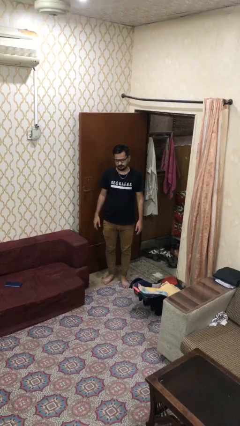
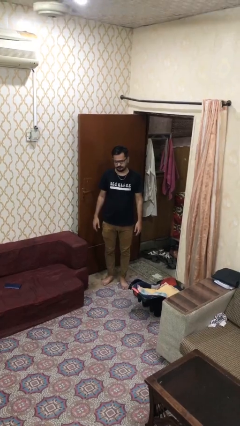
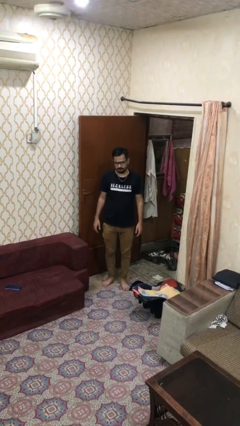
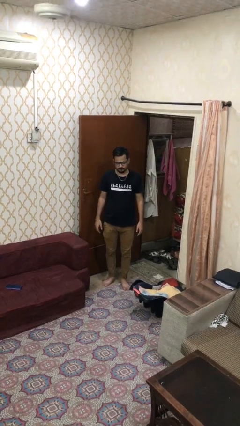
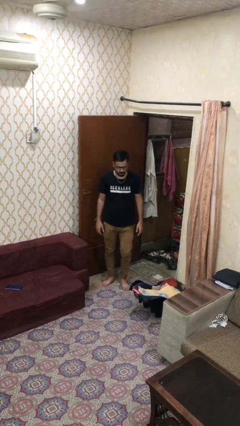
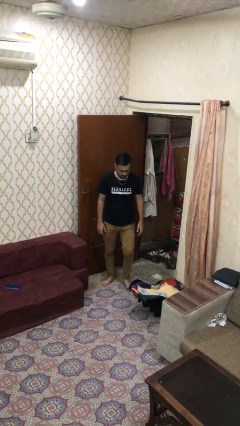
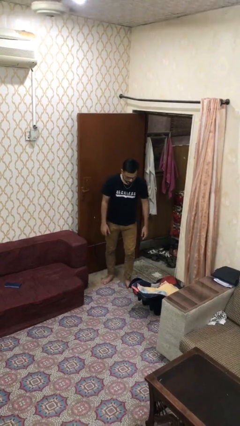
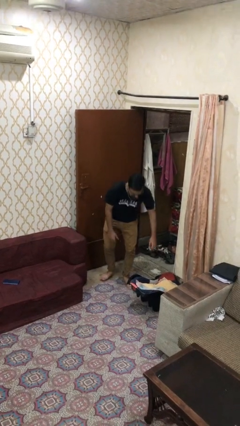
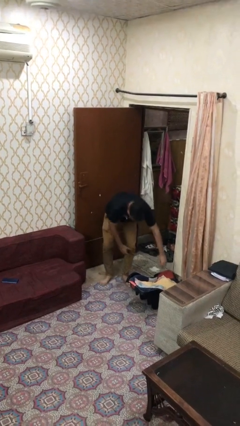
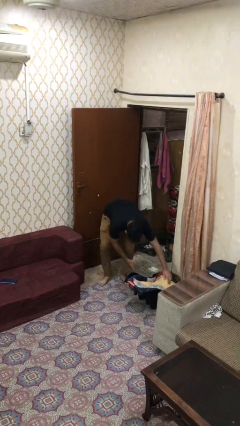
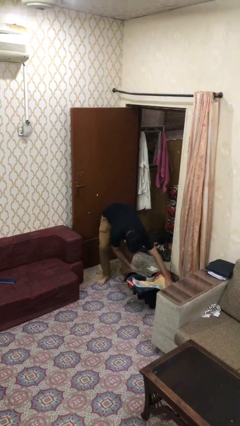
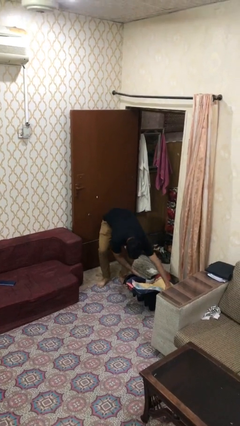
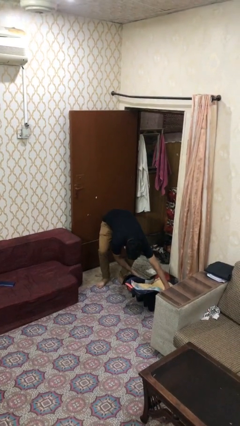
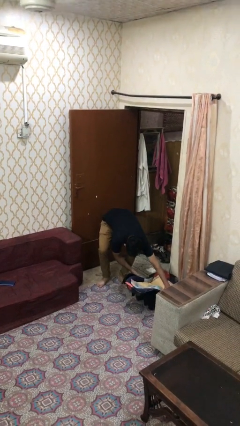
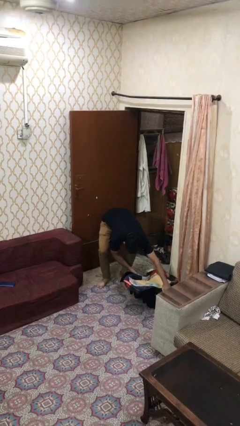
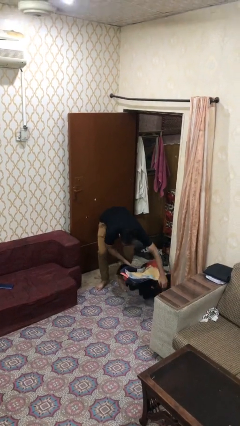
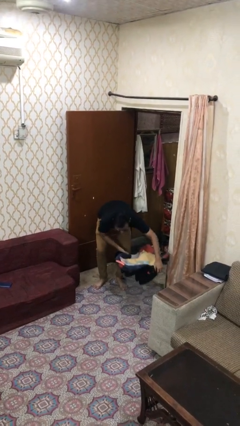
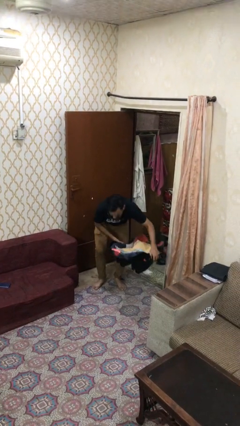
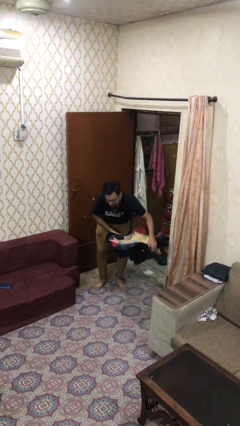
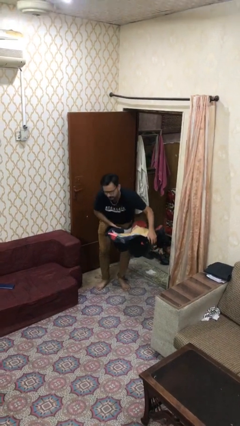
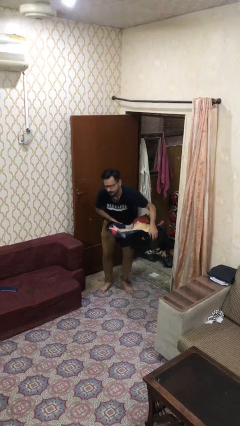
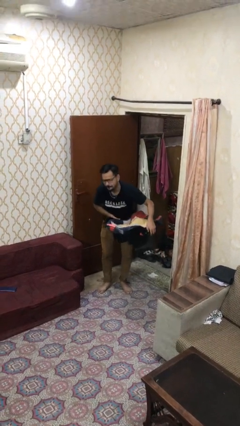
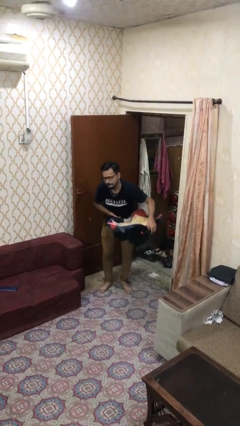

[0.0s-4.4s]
person picks up object from floor

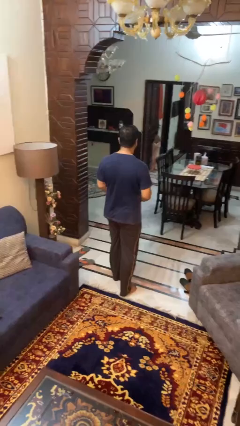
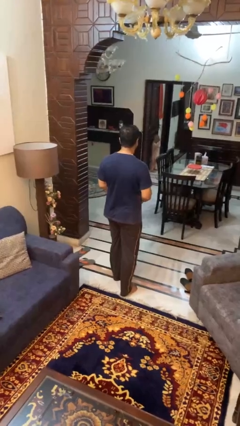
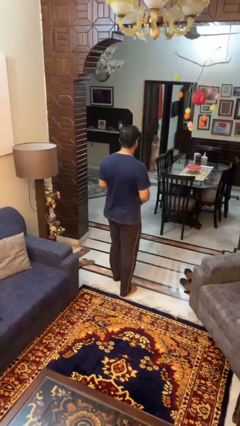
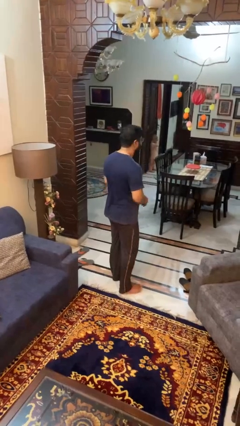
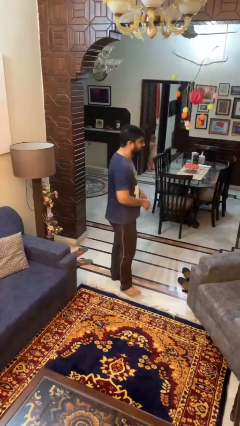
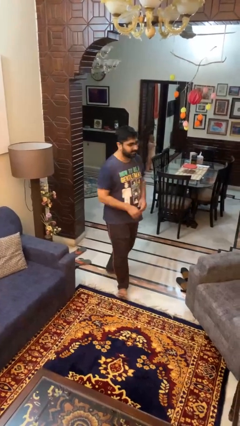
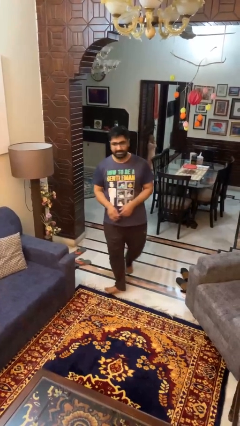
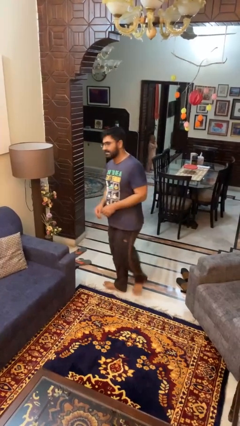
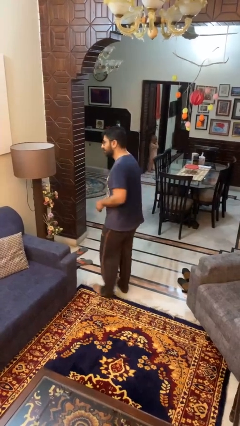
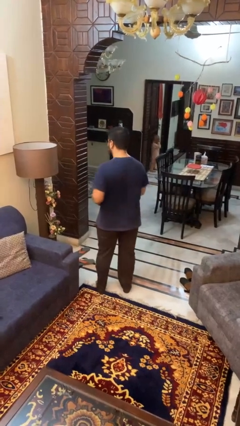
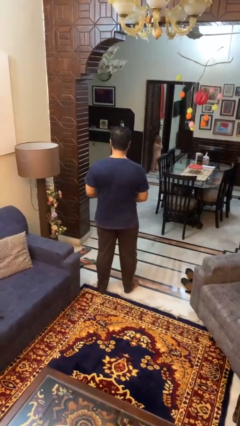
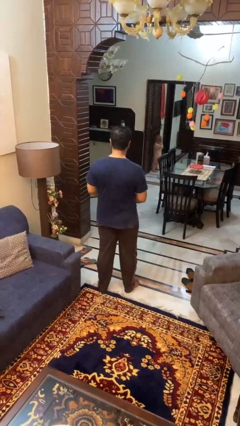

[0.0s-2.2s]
person twirls

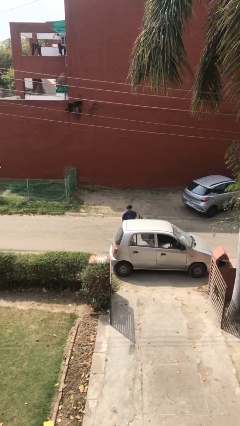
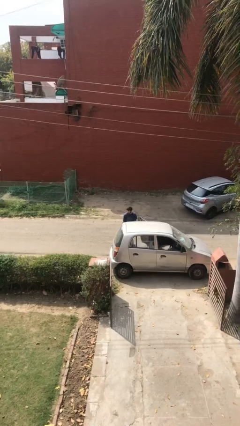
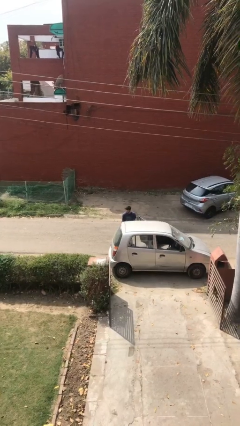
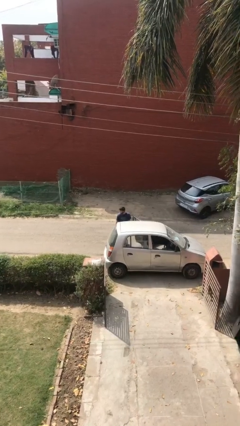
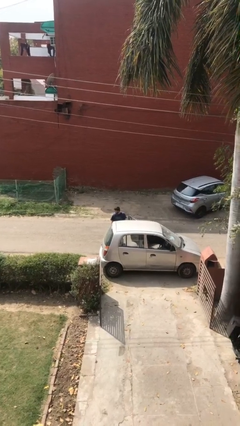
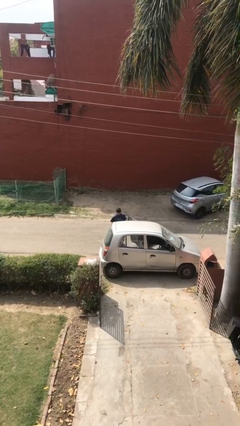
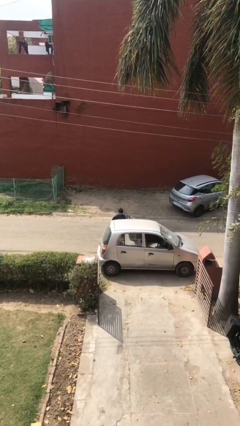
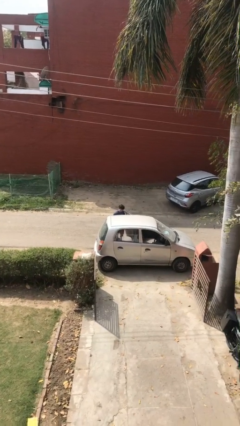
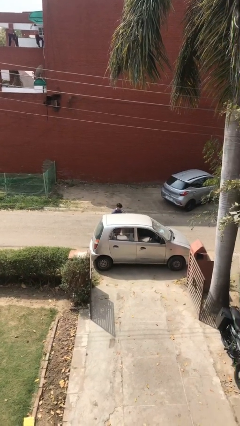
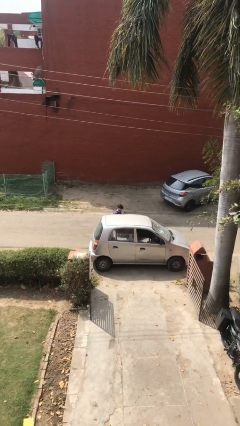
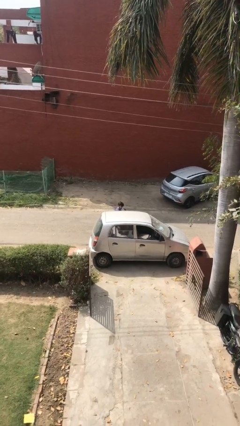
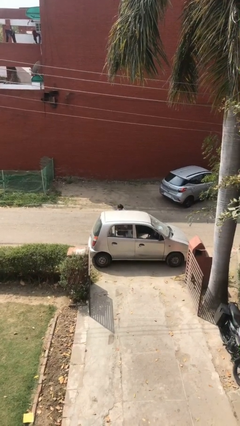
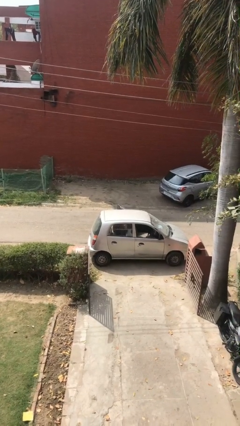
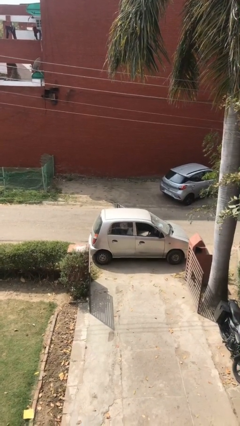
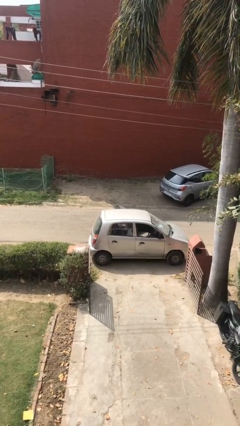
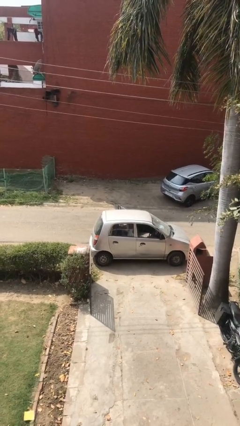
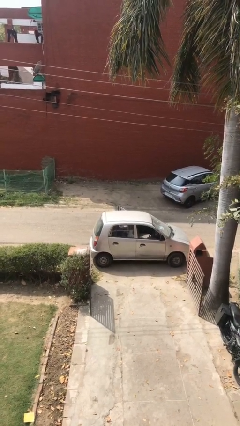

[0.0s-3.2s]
person enters car

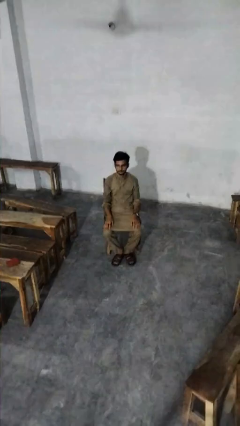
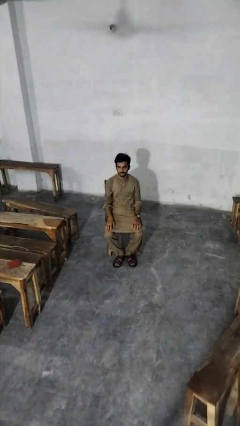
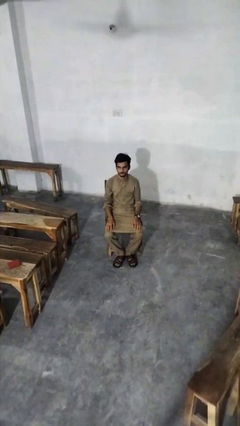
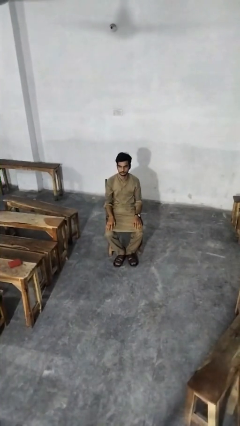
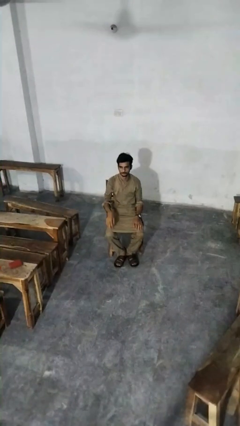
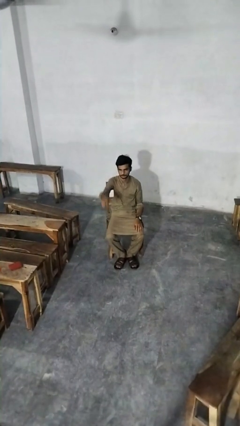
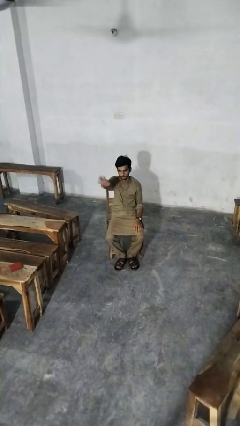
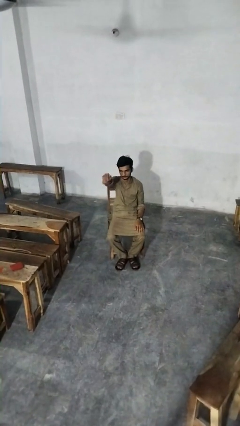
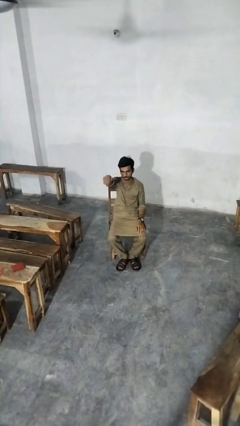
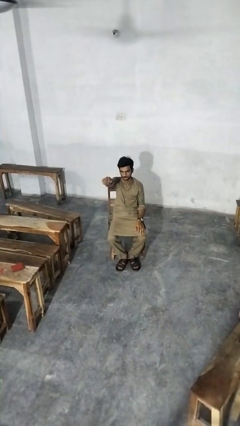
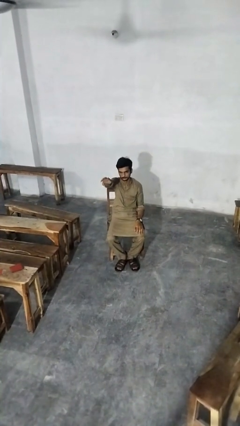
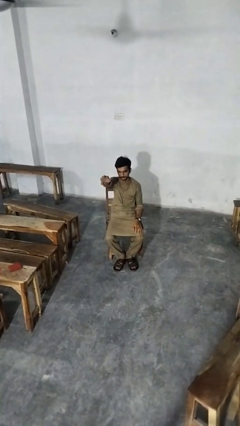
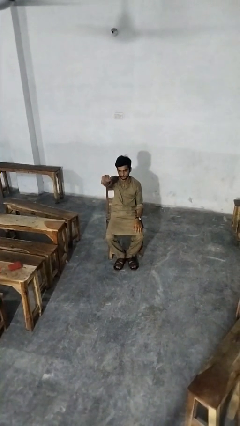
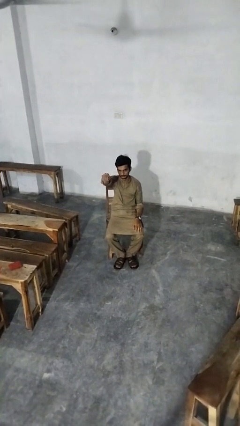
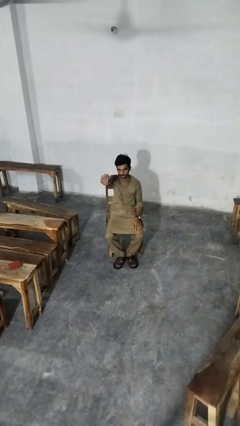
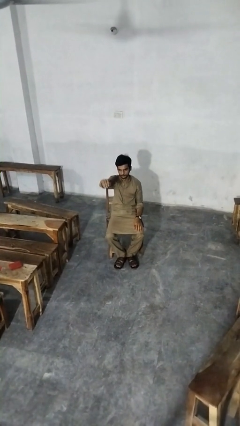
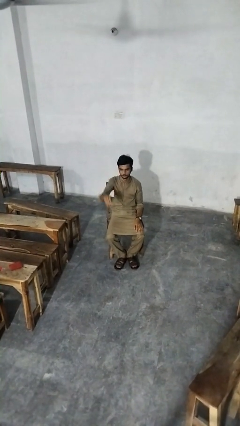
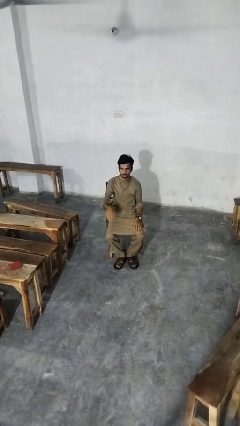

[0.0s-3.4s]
person gestures come here

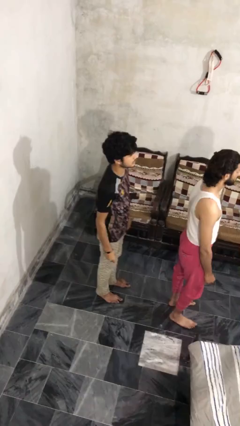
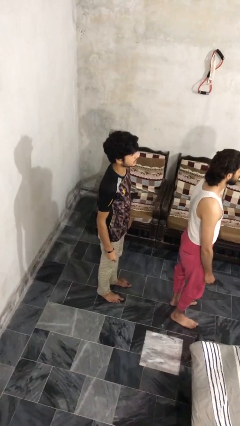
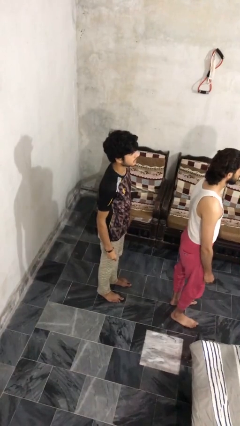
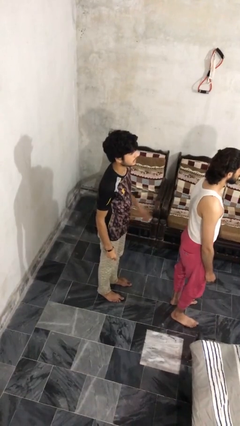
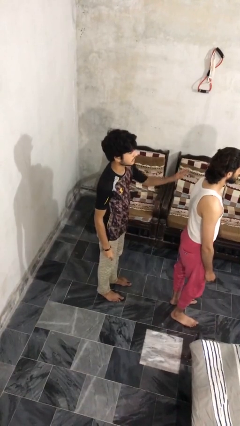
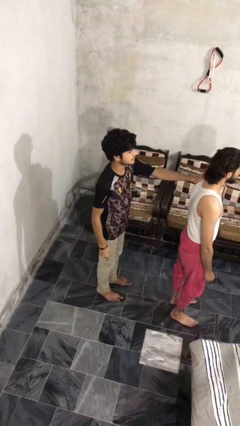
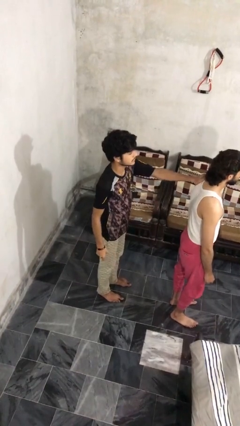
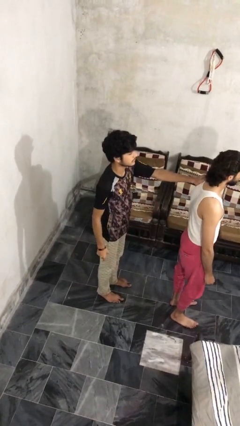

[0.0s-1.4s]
person grabs person by shoulder

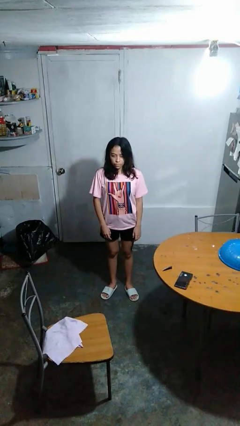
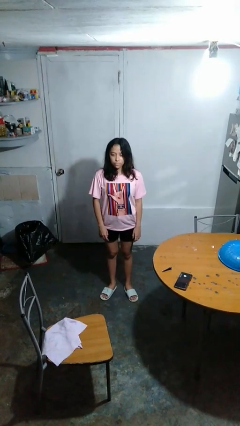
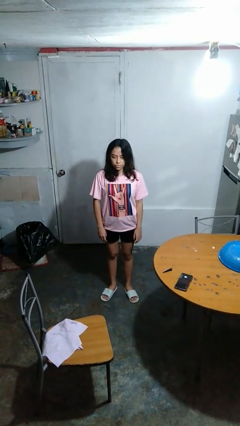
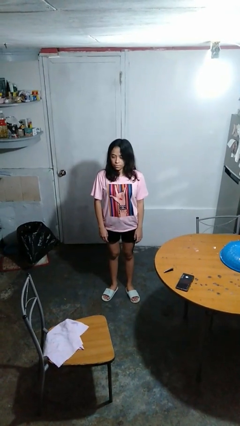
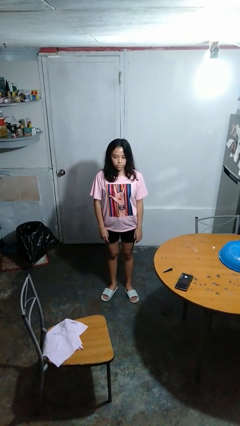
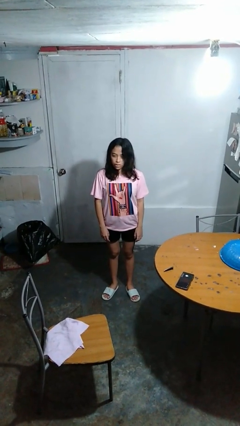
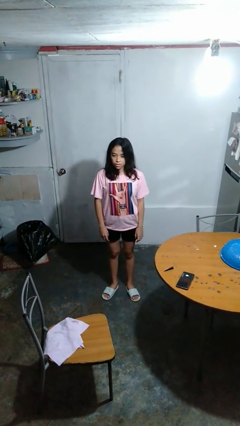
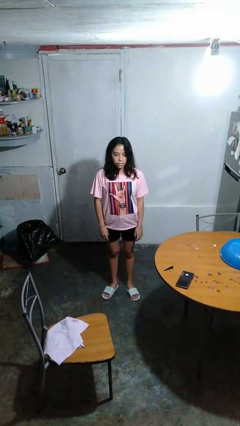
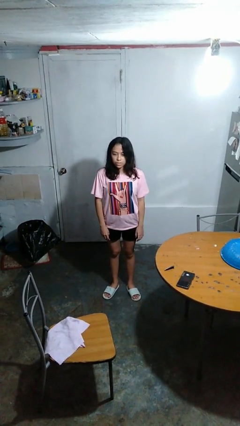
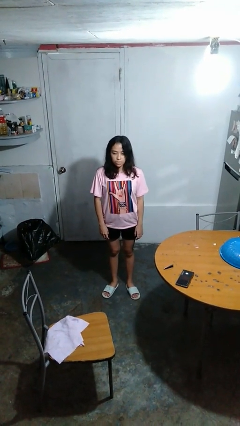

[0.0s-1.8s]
person shakes head

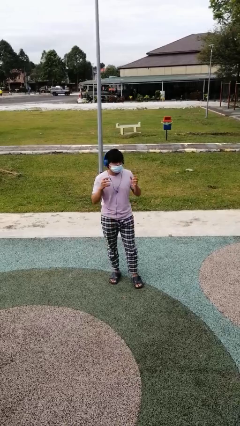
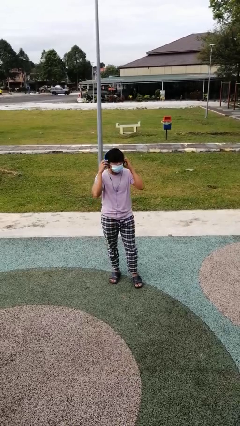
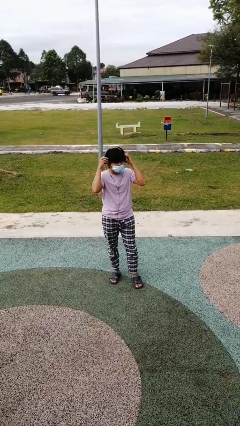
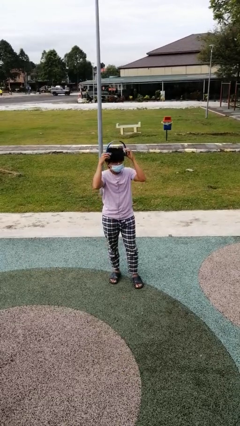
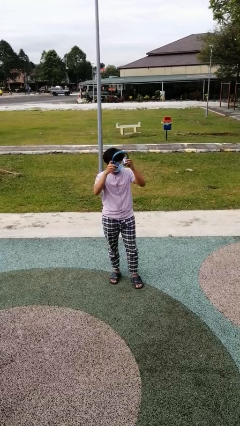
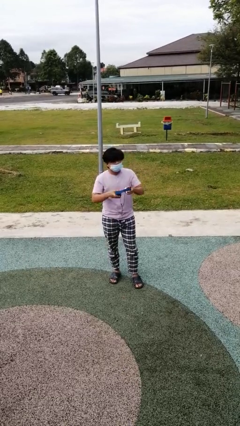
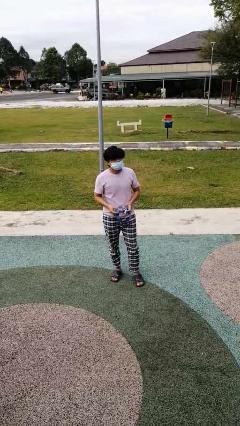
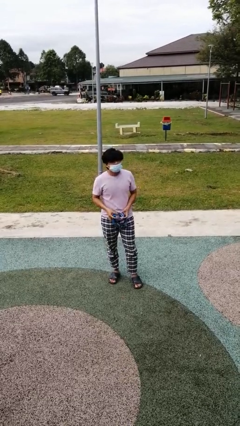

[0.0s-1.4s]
person takes off headphones
